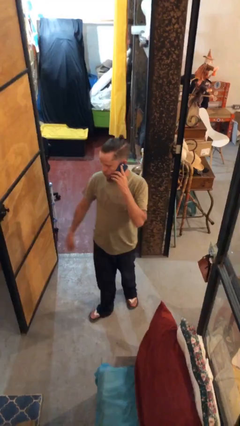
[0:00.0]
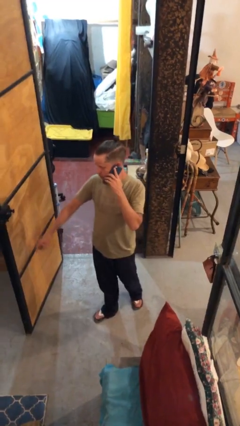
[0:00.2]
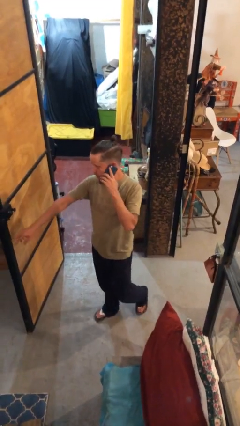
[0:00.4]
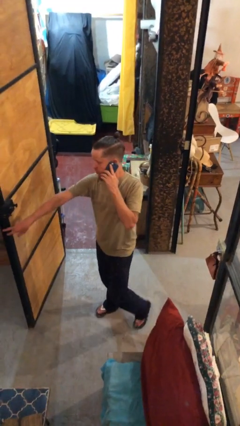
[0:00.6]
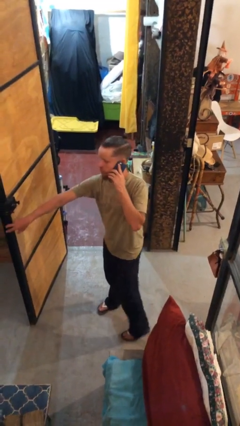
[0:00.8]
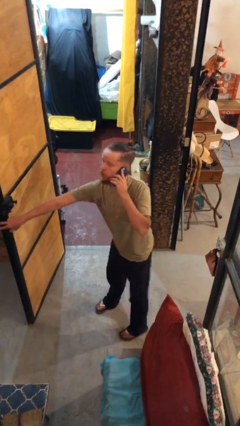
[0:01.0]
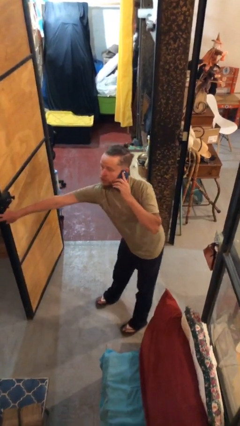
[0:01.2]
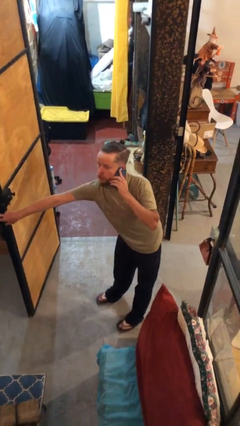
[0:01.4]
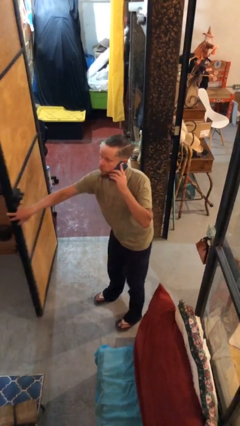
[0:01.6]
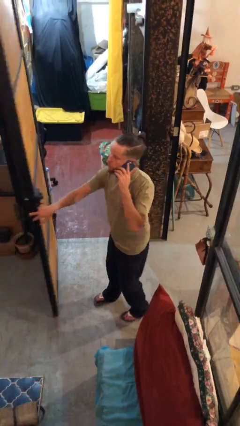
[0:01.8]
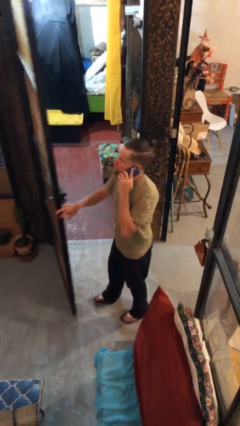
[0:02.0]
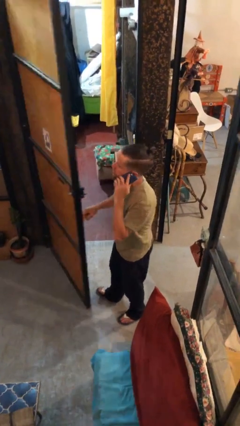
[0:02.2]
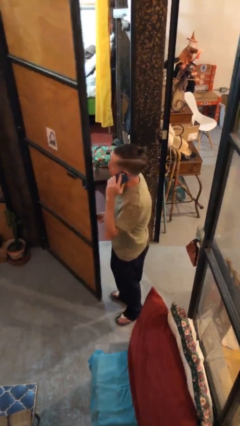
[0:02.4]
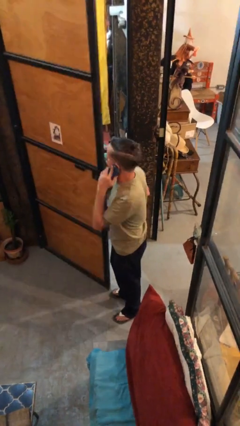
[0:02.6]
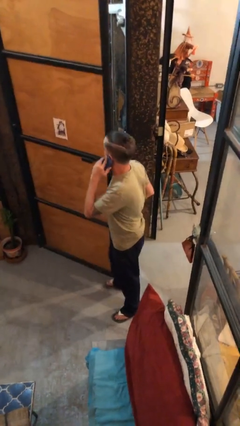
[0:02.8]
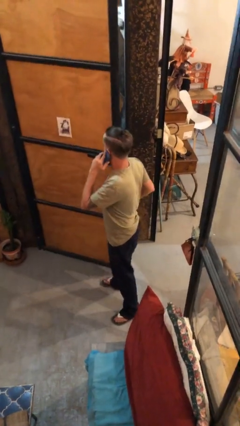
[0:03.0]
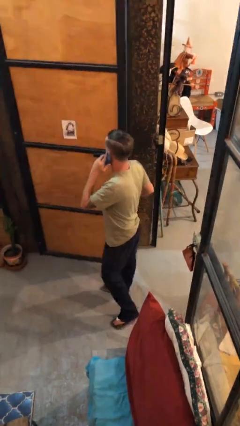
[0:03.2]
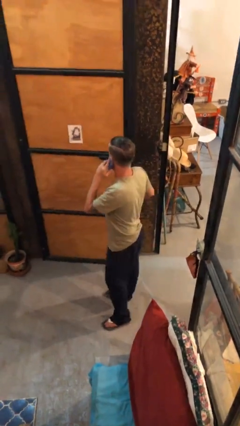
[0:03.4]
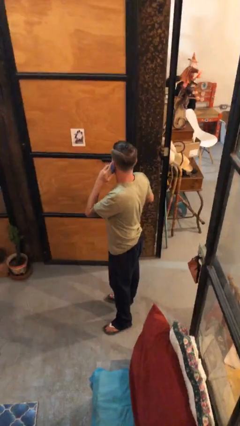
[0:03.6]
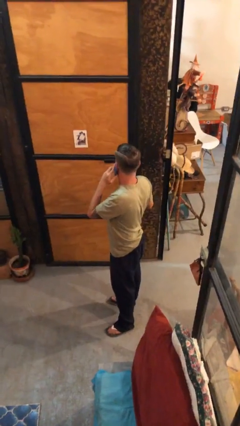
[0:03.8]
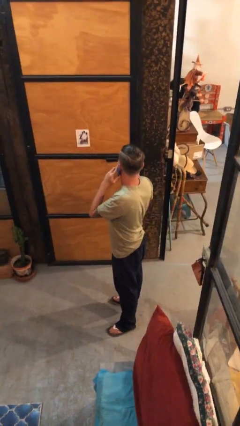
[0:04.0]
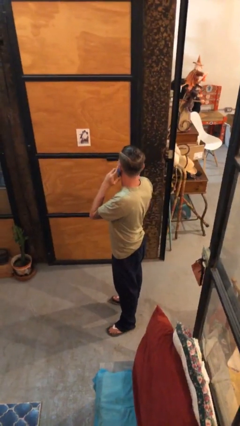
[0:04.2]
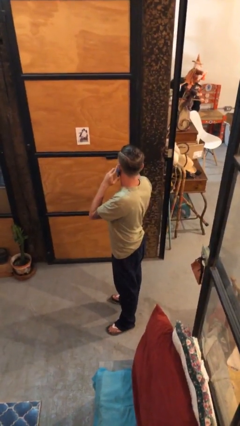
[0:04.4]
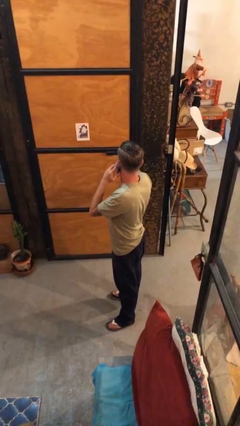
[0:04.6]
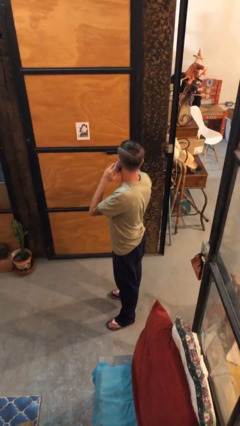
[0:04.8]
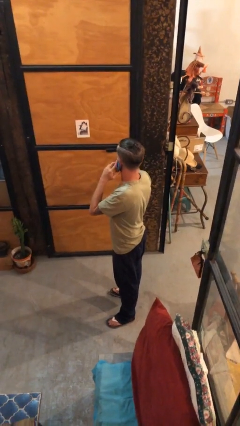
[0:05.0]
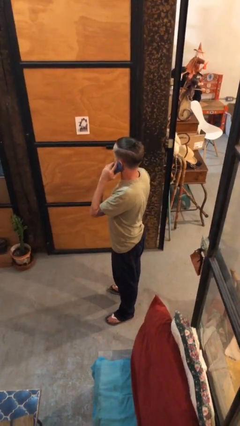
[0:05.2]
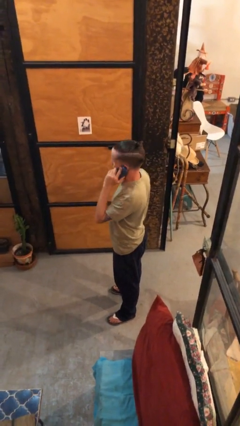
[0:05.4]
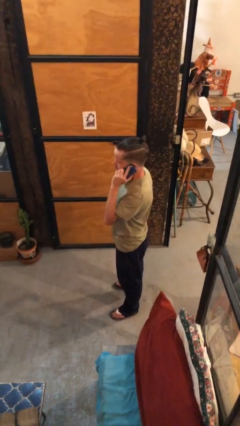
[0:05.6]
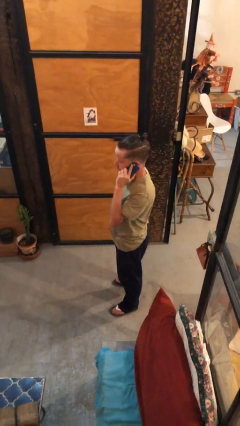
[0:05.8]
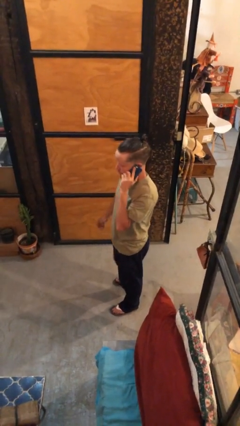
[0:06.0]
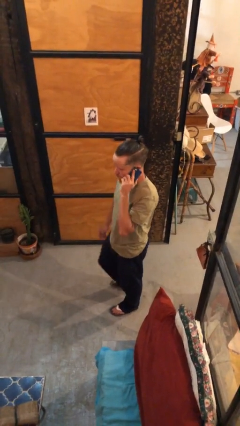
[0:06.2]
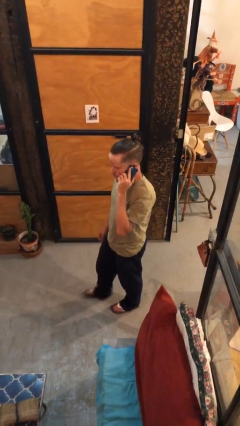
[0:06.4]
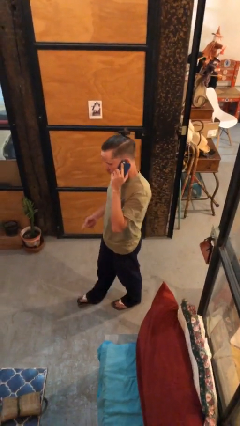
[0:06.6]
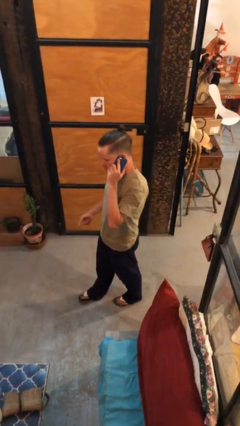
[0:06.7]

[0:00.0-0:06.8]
person closes facility door

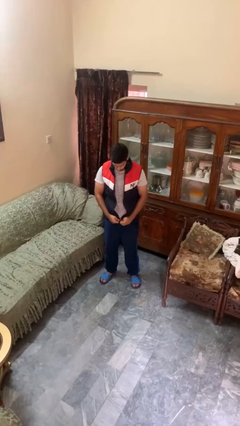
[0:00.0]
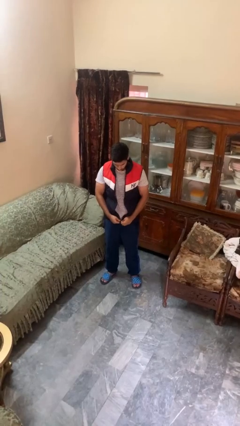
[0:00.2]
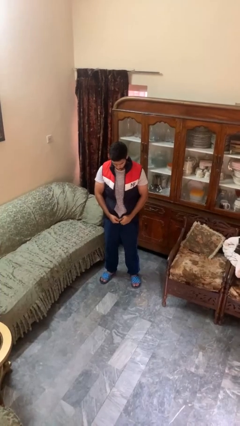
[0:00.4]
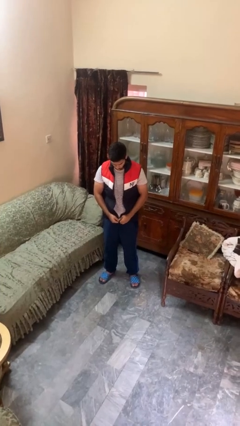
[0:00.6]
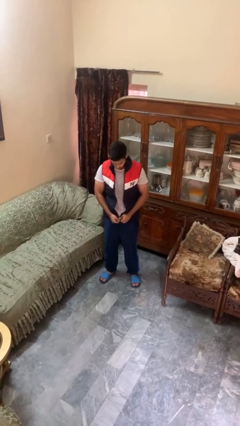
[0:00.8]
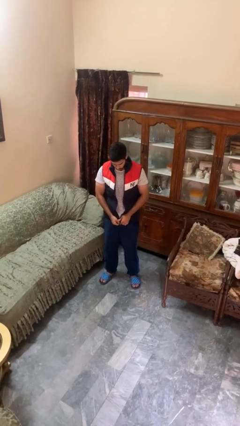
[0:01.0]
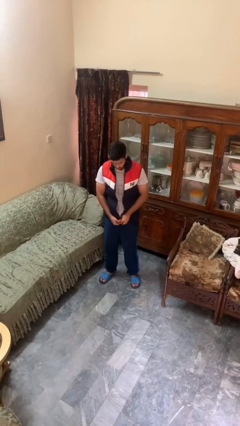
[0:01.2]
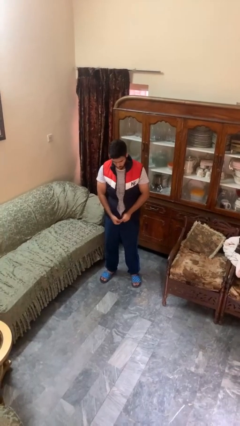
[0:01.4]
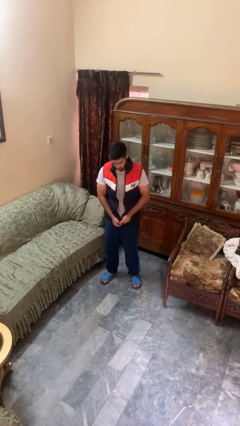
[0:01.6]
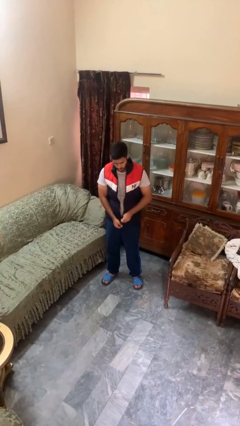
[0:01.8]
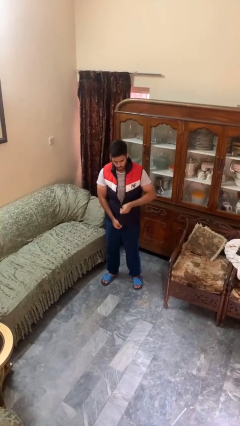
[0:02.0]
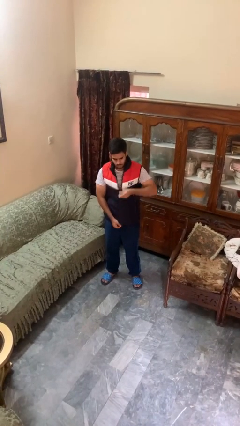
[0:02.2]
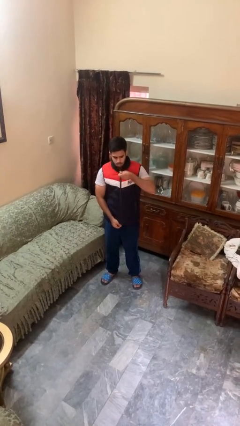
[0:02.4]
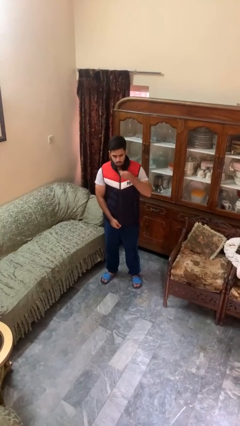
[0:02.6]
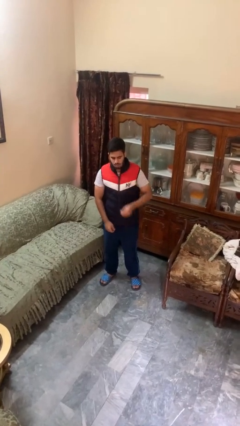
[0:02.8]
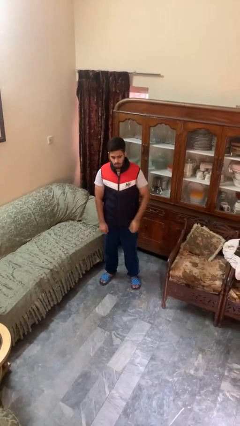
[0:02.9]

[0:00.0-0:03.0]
person zips up jacket

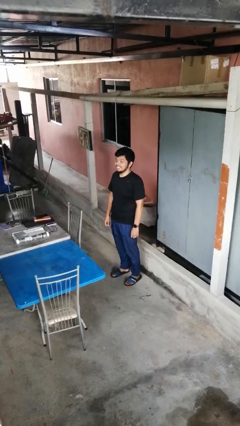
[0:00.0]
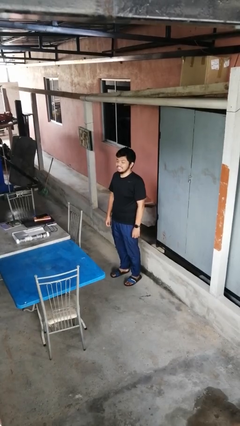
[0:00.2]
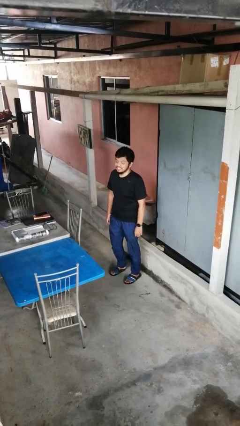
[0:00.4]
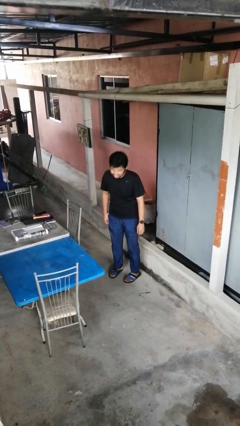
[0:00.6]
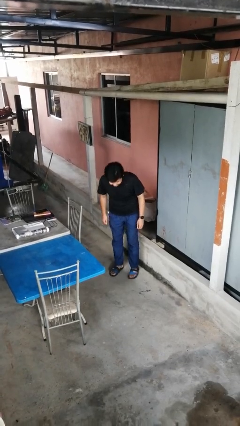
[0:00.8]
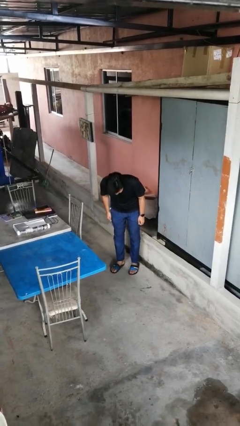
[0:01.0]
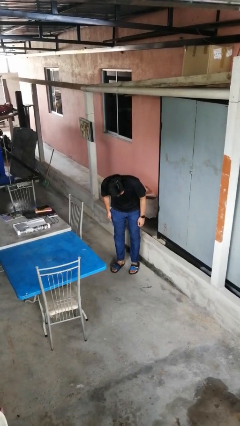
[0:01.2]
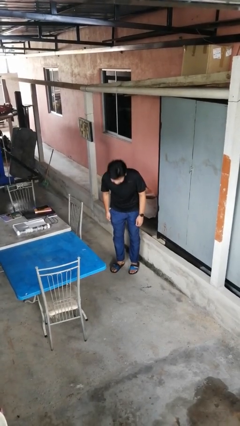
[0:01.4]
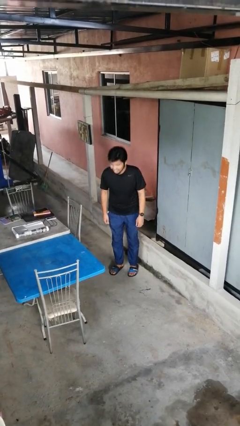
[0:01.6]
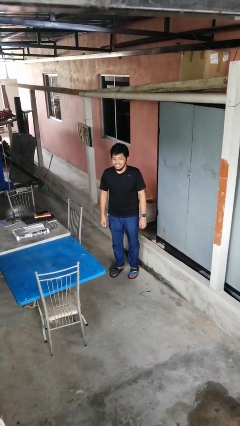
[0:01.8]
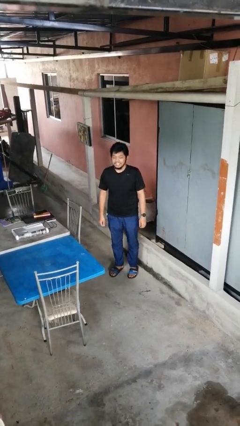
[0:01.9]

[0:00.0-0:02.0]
person bows

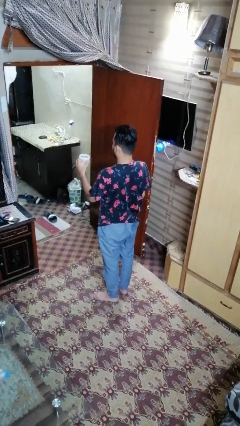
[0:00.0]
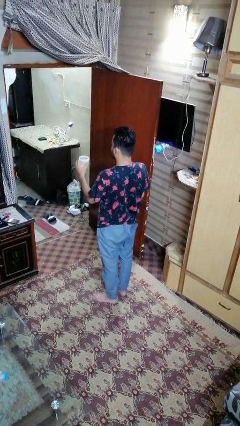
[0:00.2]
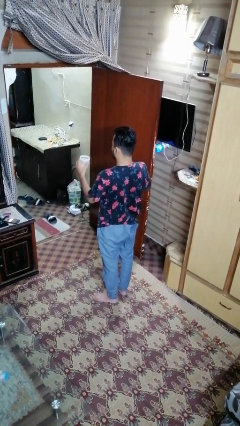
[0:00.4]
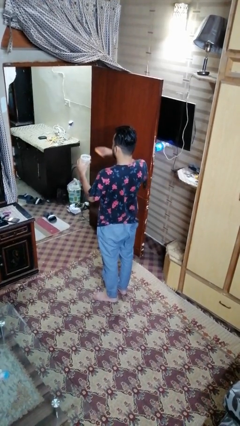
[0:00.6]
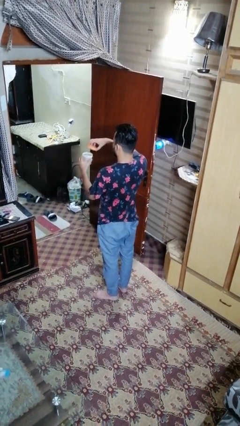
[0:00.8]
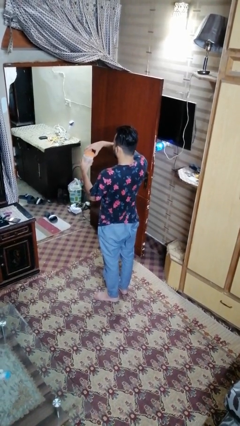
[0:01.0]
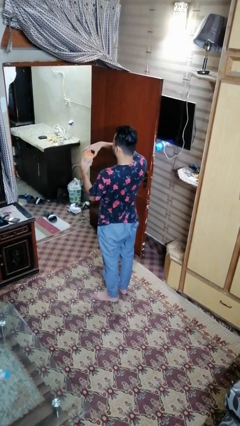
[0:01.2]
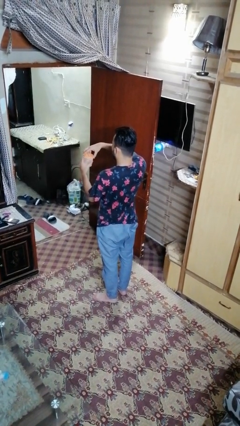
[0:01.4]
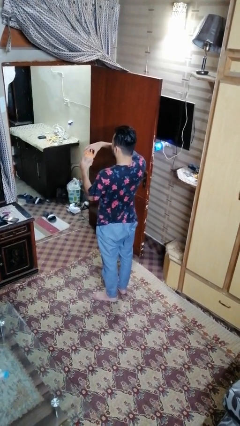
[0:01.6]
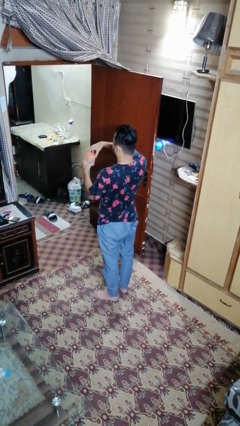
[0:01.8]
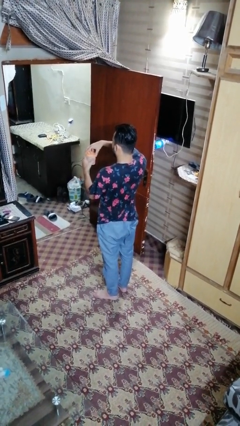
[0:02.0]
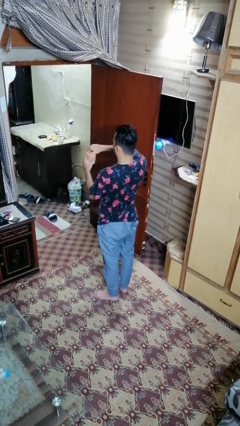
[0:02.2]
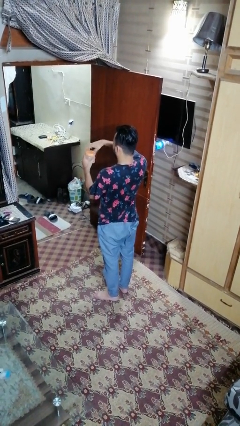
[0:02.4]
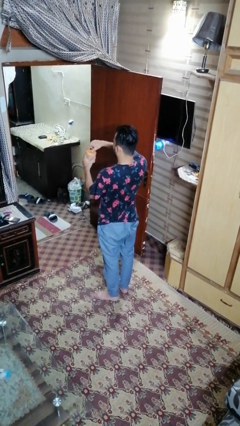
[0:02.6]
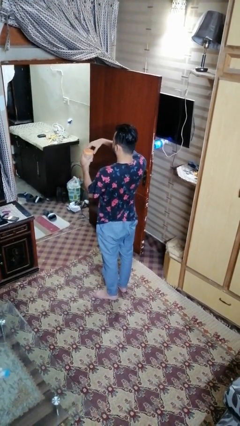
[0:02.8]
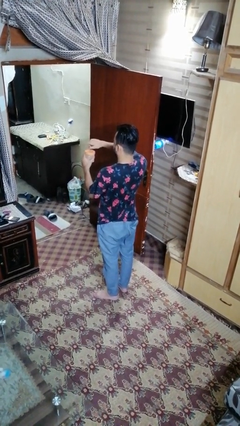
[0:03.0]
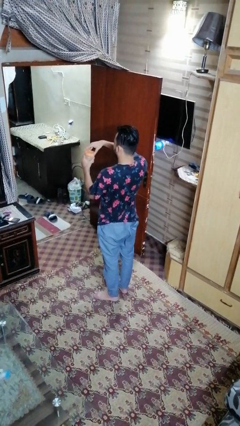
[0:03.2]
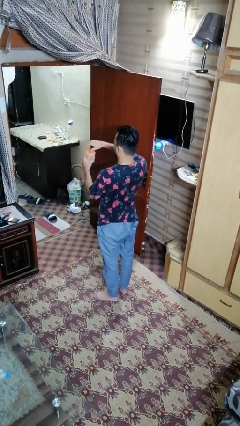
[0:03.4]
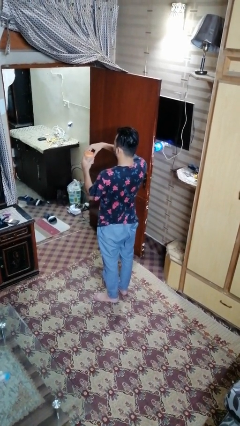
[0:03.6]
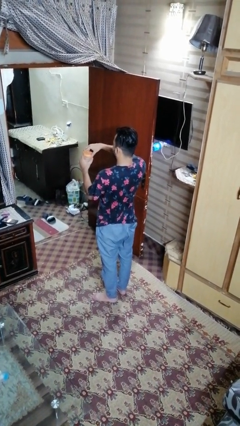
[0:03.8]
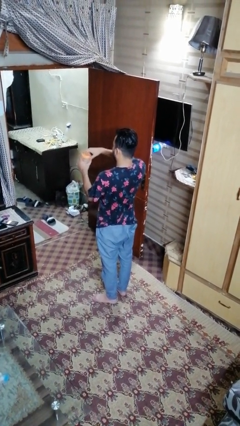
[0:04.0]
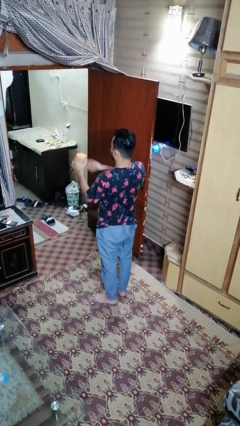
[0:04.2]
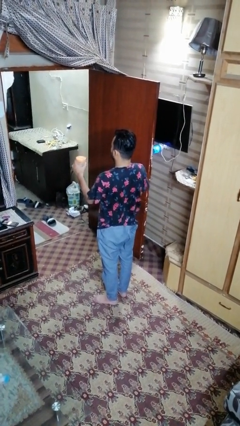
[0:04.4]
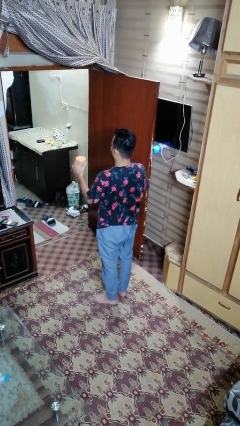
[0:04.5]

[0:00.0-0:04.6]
person closes jar

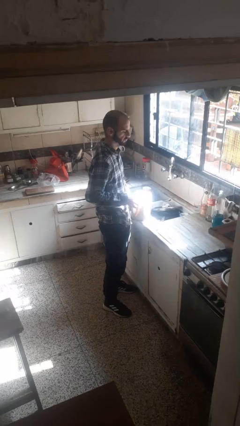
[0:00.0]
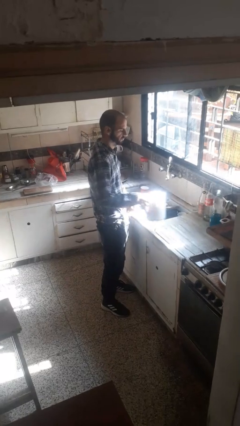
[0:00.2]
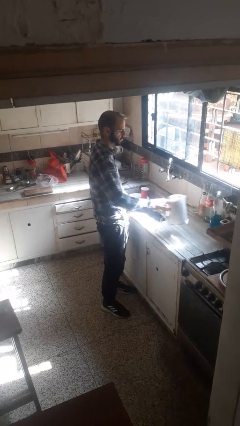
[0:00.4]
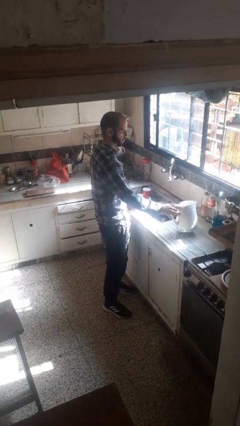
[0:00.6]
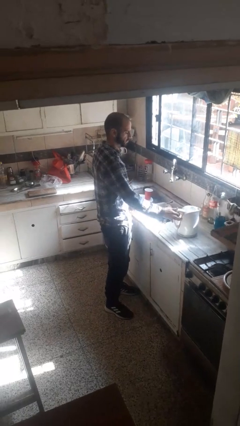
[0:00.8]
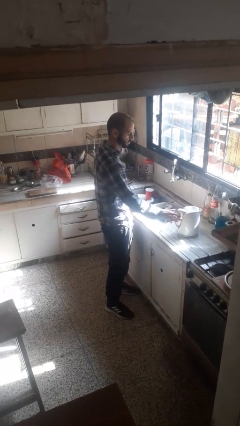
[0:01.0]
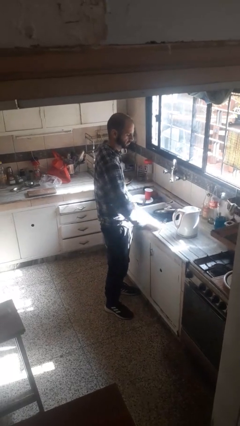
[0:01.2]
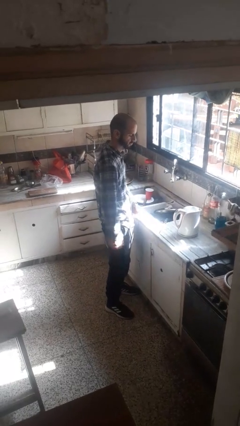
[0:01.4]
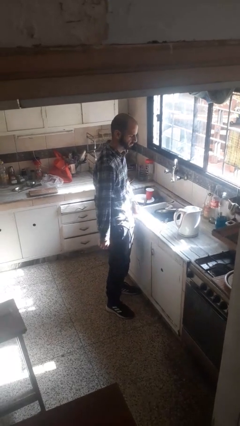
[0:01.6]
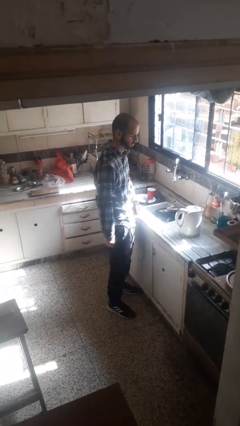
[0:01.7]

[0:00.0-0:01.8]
person puts down object on countertop
